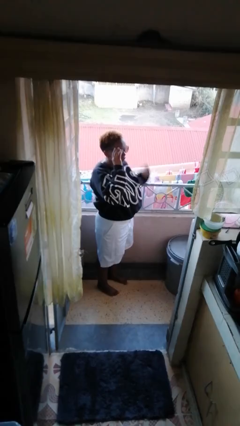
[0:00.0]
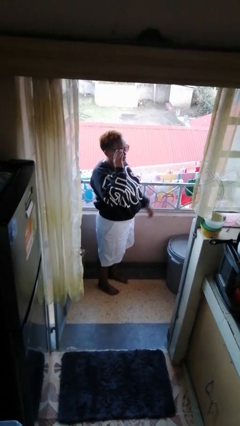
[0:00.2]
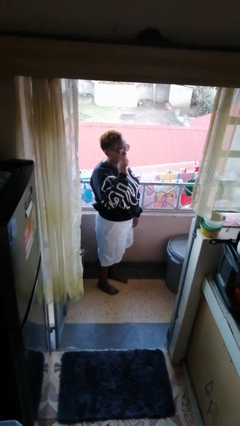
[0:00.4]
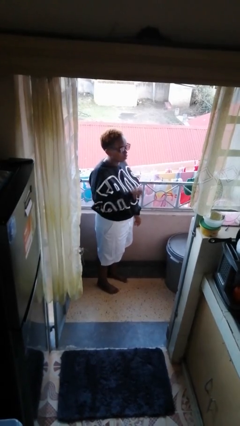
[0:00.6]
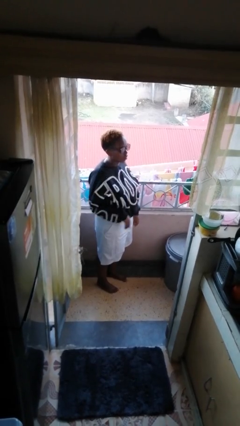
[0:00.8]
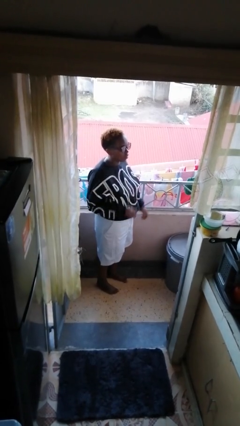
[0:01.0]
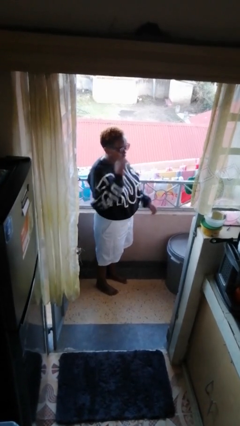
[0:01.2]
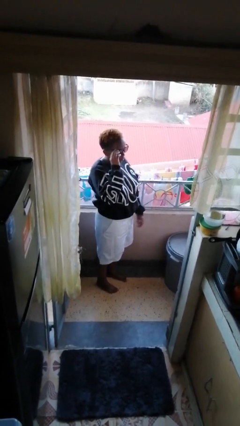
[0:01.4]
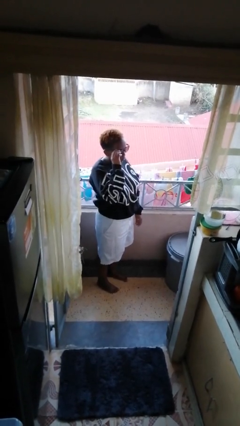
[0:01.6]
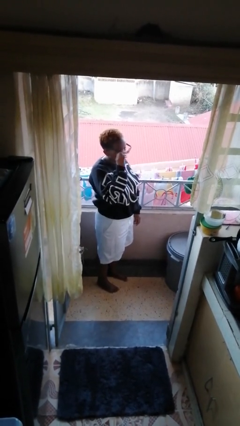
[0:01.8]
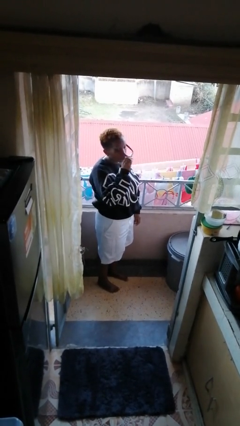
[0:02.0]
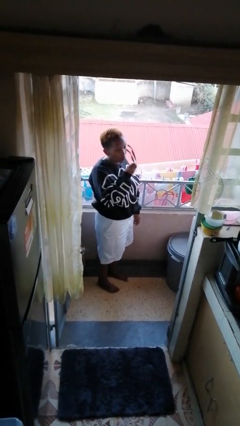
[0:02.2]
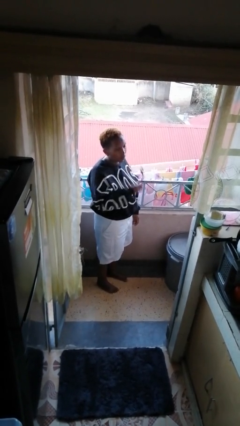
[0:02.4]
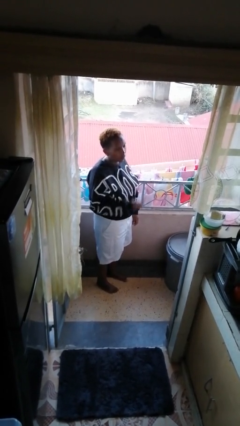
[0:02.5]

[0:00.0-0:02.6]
person takes off sunglasses

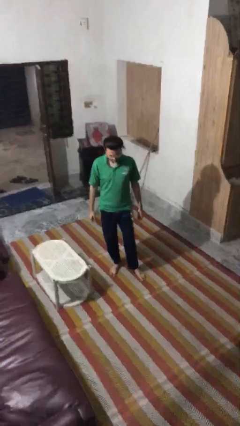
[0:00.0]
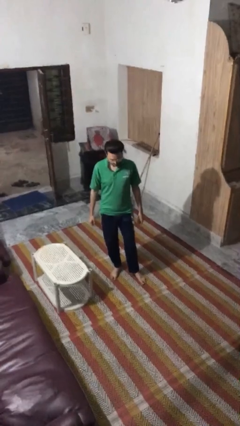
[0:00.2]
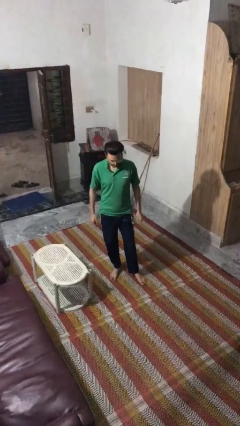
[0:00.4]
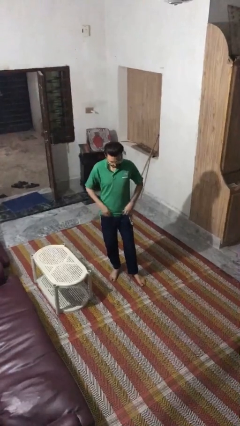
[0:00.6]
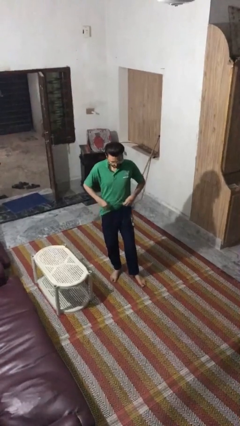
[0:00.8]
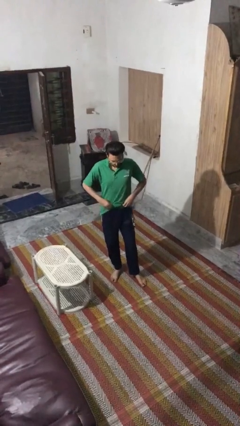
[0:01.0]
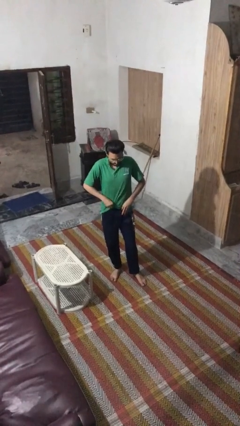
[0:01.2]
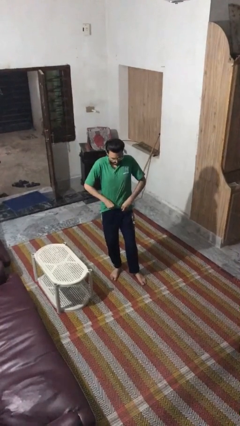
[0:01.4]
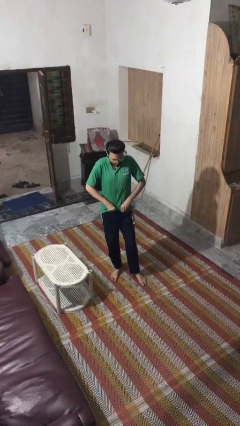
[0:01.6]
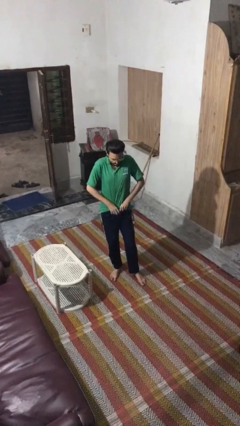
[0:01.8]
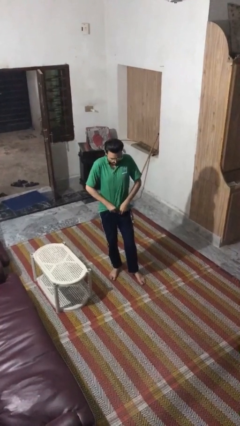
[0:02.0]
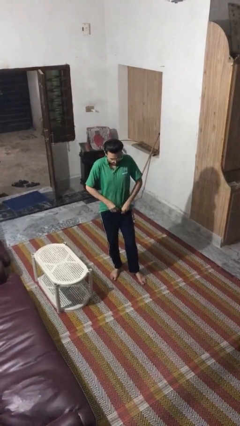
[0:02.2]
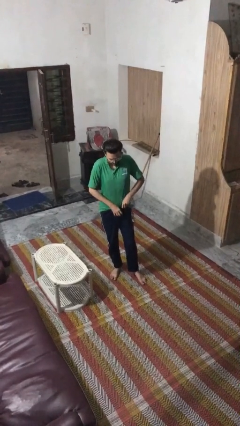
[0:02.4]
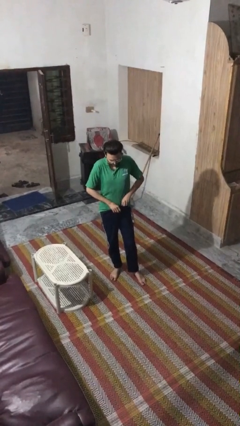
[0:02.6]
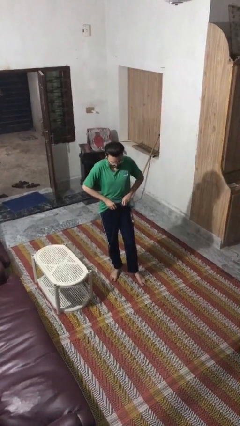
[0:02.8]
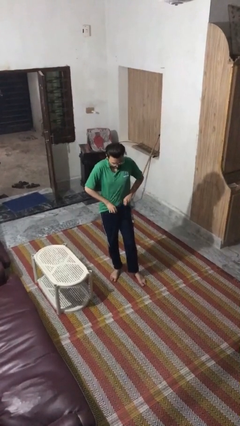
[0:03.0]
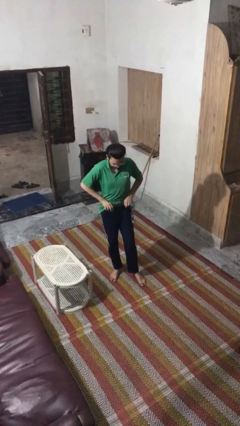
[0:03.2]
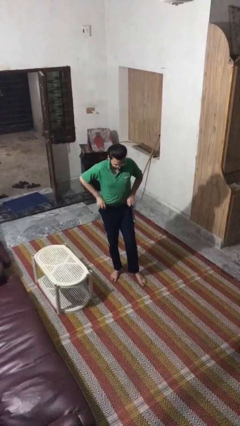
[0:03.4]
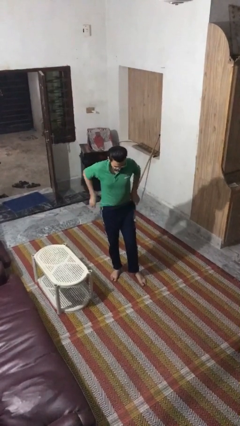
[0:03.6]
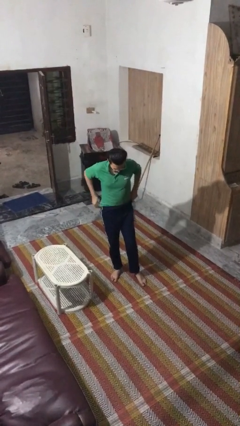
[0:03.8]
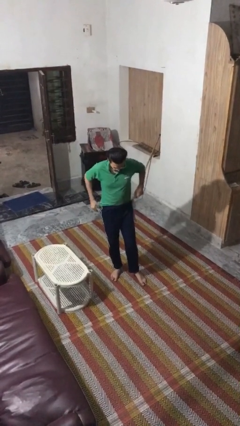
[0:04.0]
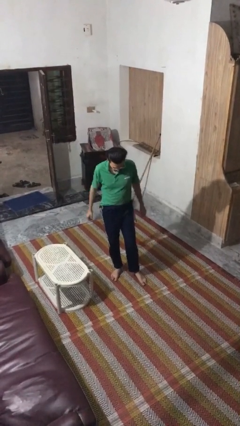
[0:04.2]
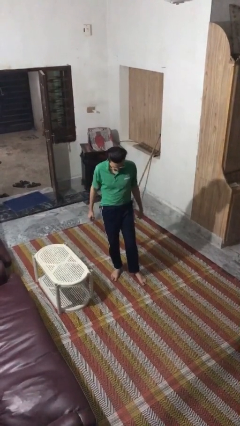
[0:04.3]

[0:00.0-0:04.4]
person tucks in shirt

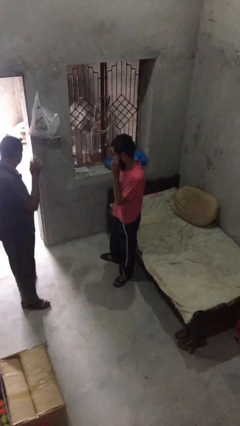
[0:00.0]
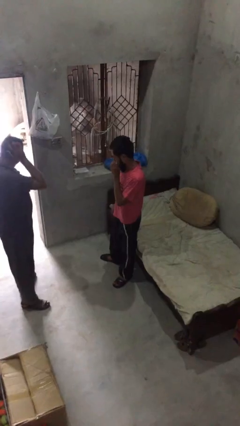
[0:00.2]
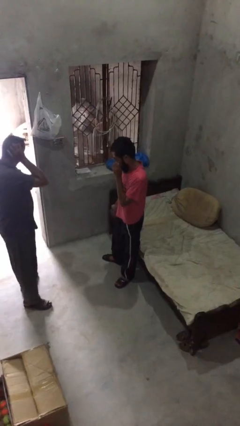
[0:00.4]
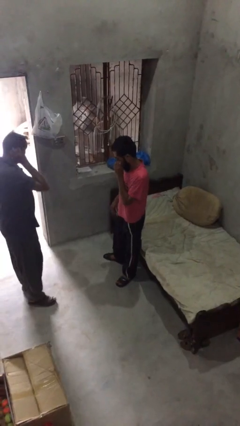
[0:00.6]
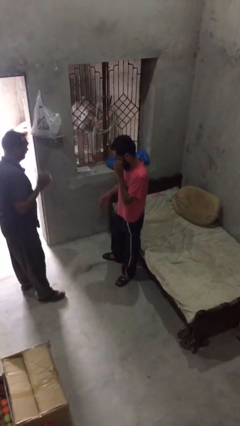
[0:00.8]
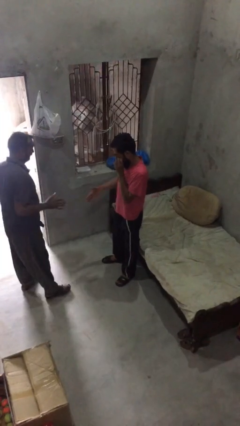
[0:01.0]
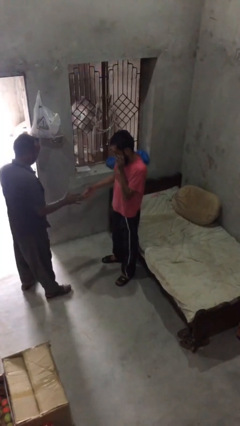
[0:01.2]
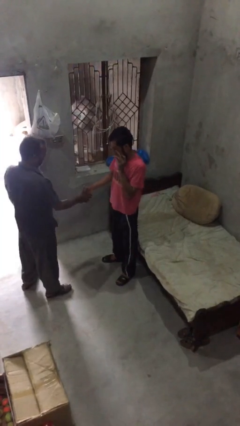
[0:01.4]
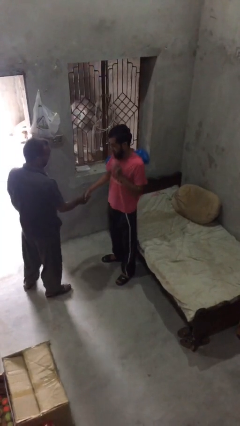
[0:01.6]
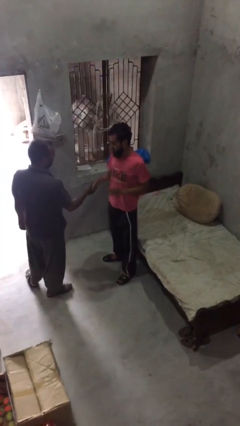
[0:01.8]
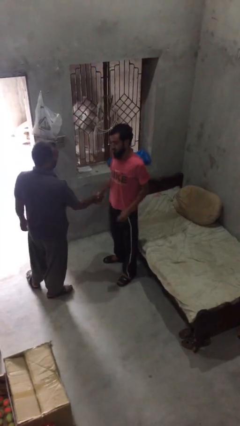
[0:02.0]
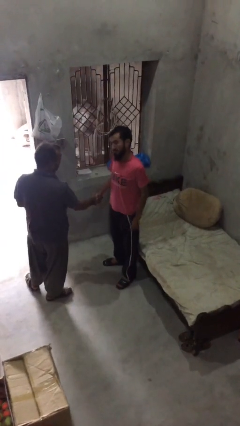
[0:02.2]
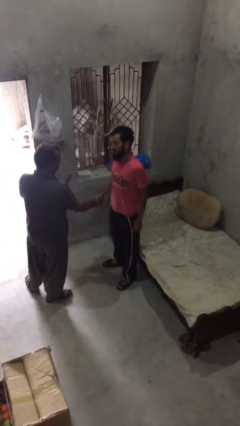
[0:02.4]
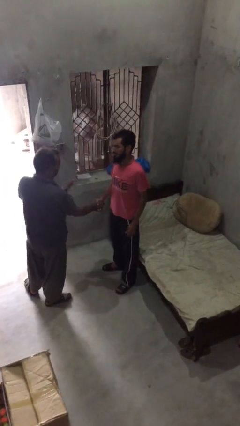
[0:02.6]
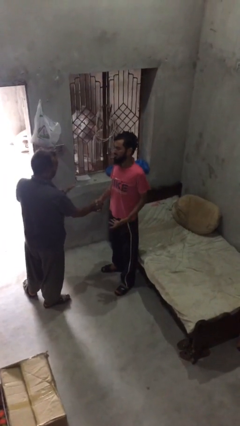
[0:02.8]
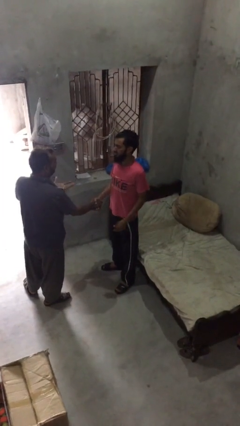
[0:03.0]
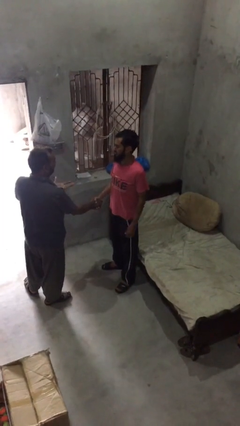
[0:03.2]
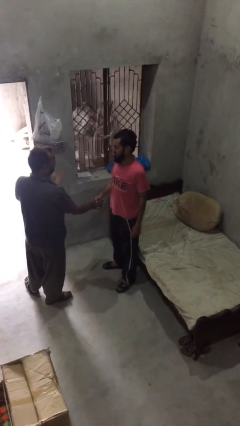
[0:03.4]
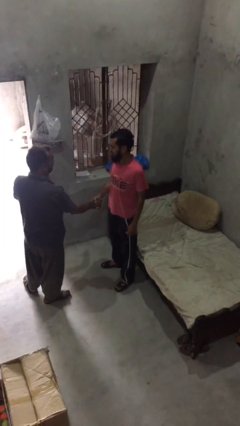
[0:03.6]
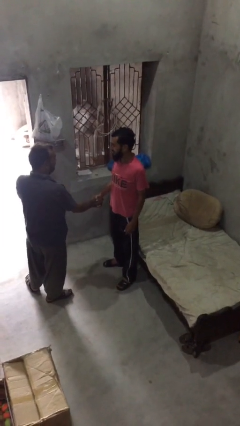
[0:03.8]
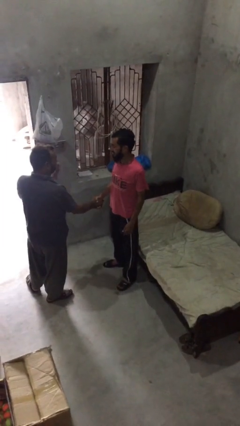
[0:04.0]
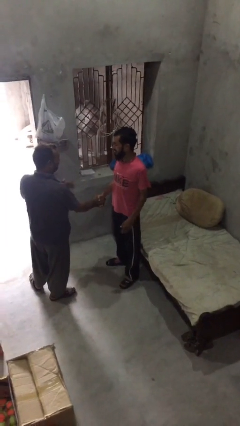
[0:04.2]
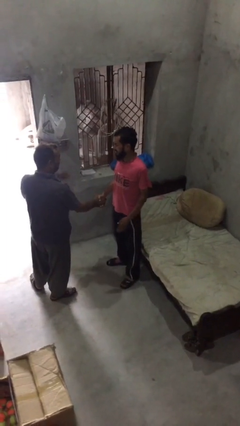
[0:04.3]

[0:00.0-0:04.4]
person shakes hand

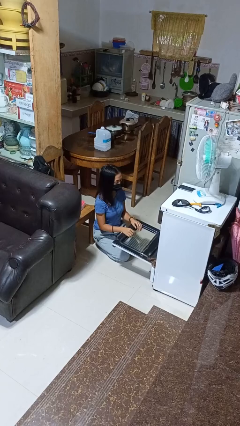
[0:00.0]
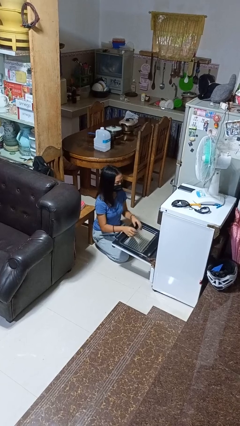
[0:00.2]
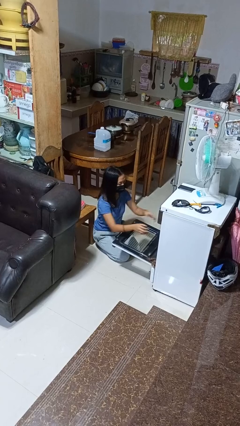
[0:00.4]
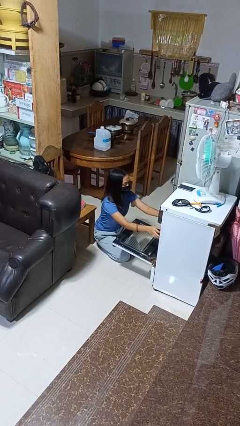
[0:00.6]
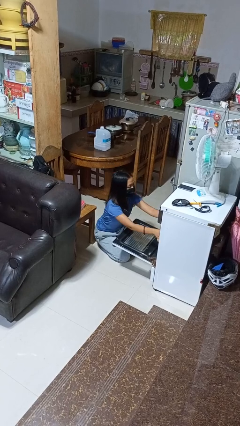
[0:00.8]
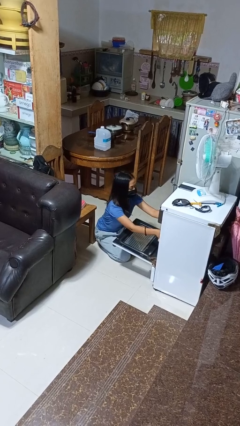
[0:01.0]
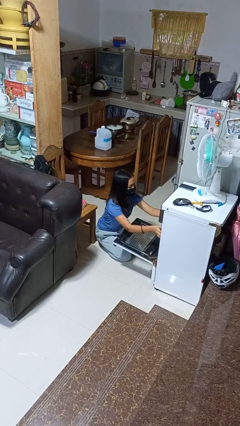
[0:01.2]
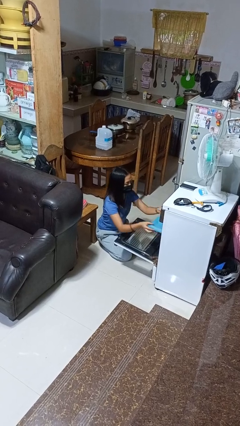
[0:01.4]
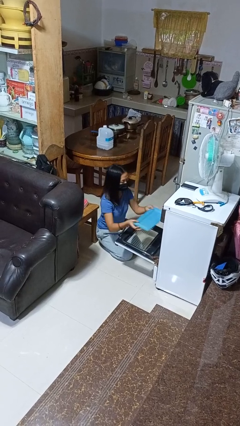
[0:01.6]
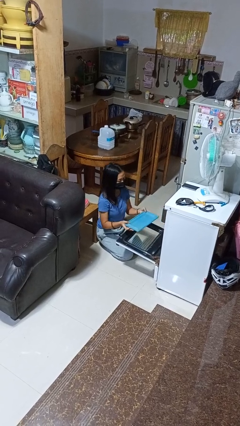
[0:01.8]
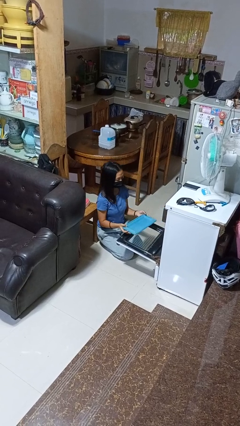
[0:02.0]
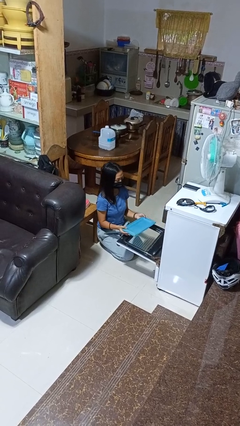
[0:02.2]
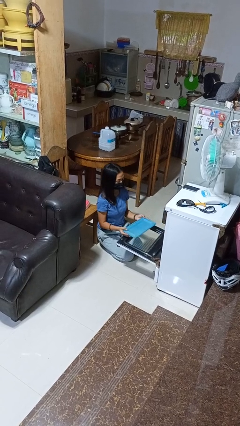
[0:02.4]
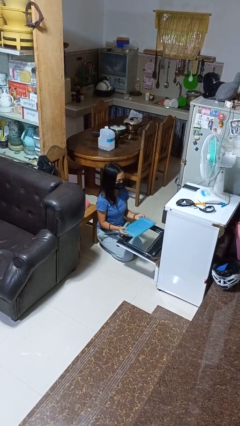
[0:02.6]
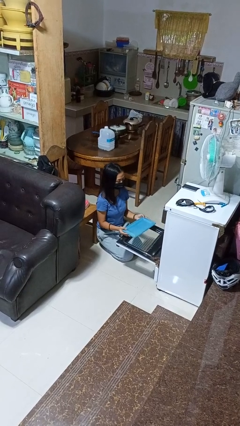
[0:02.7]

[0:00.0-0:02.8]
person takes object from oven

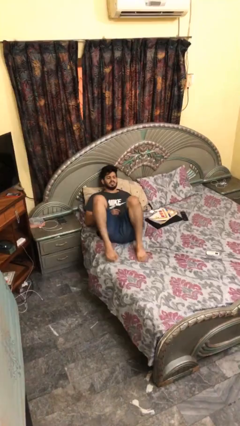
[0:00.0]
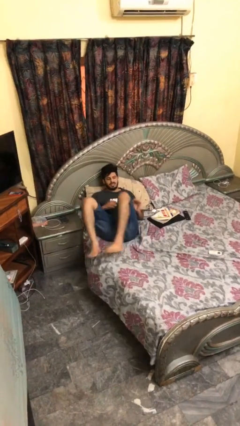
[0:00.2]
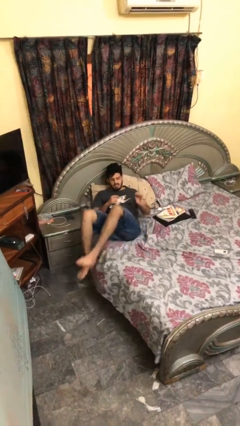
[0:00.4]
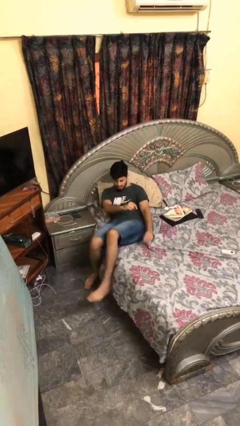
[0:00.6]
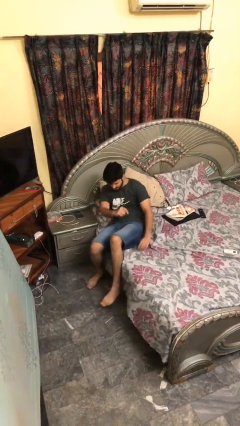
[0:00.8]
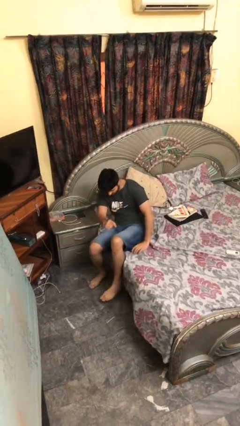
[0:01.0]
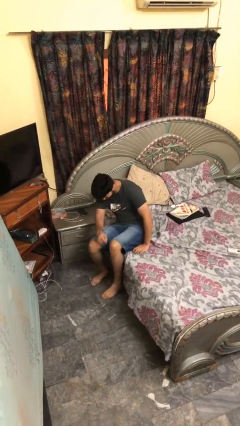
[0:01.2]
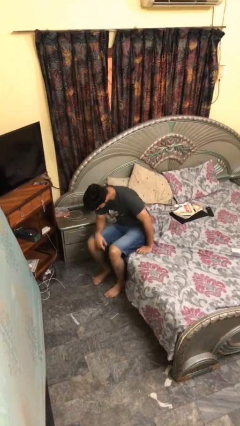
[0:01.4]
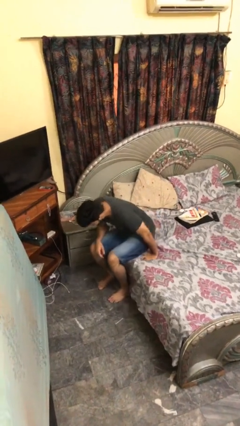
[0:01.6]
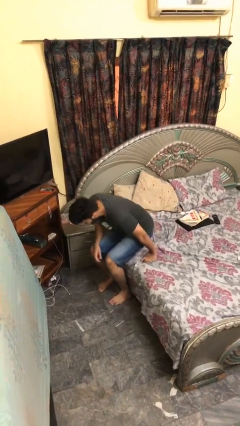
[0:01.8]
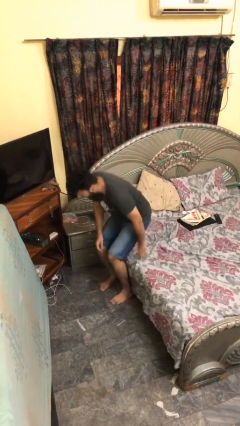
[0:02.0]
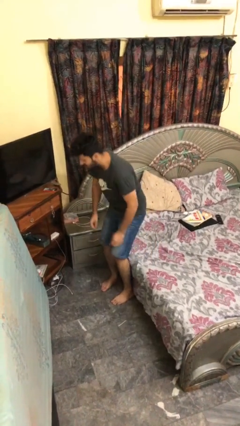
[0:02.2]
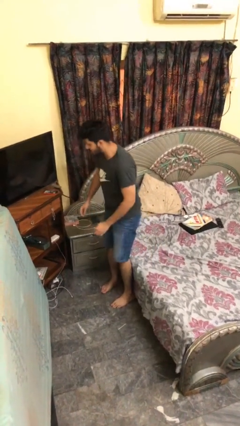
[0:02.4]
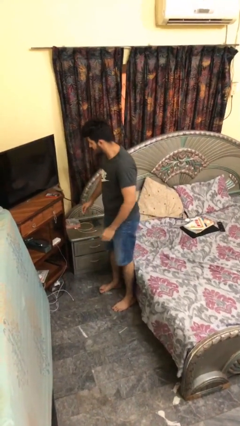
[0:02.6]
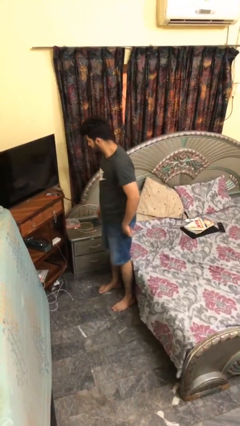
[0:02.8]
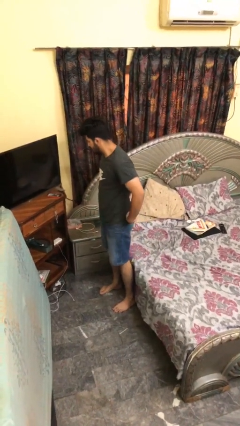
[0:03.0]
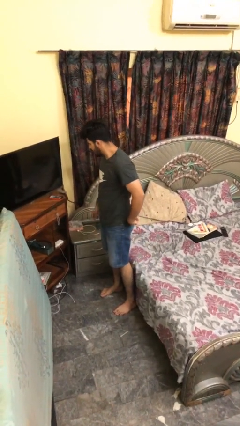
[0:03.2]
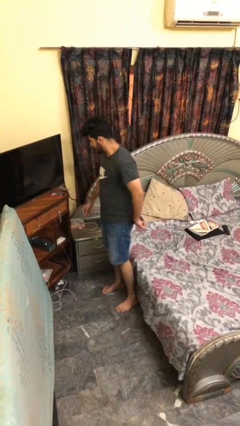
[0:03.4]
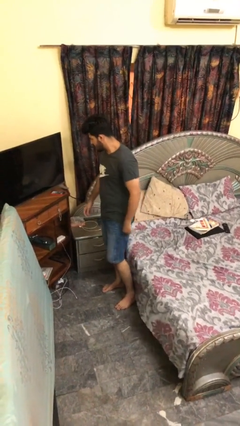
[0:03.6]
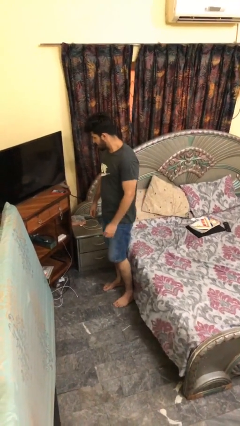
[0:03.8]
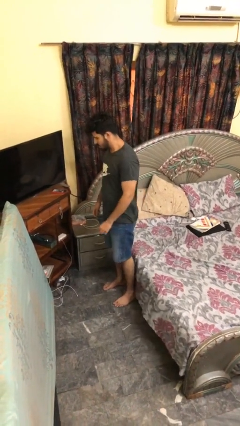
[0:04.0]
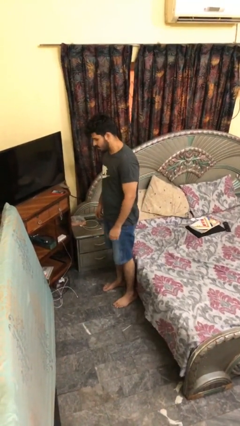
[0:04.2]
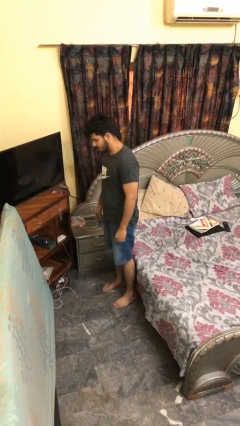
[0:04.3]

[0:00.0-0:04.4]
person stands up
